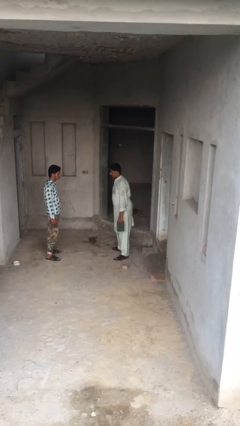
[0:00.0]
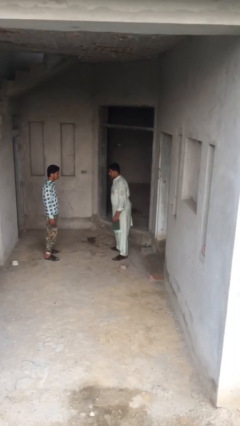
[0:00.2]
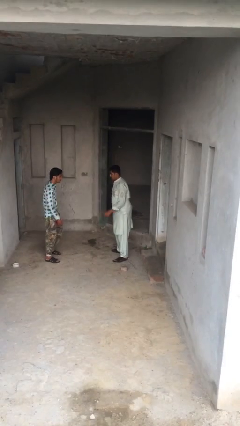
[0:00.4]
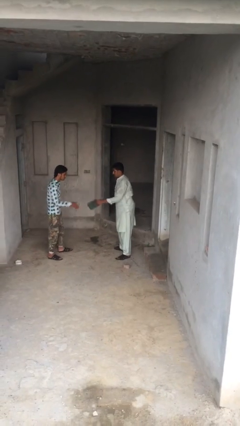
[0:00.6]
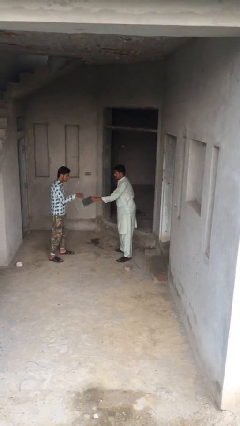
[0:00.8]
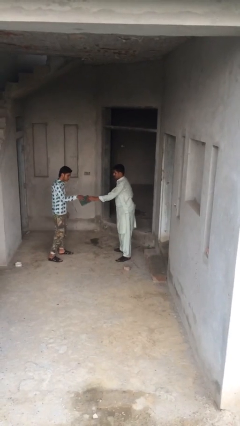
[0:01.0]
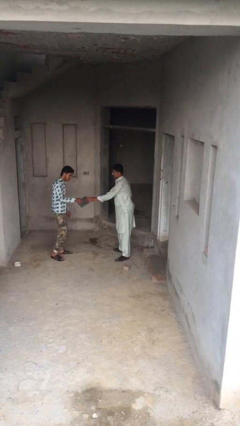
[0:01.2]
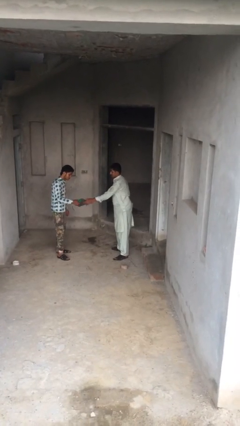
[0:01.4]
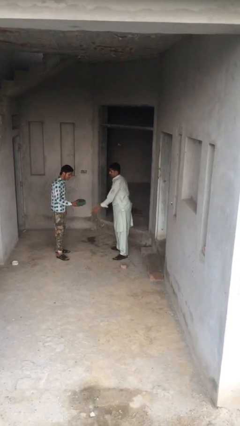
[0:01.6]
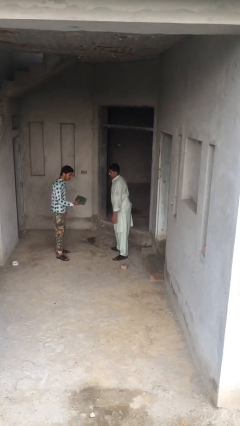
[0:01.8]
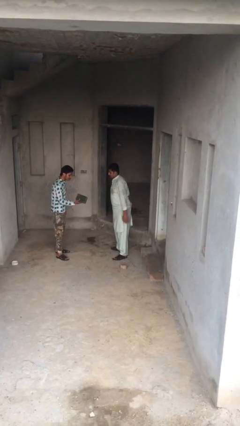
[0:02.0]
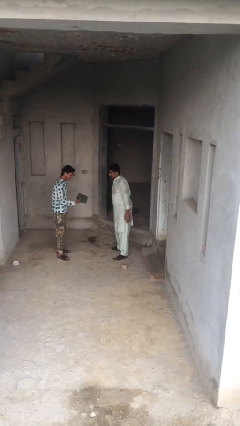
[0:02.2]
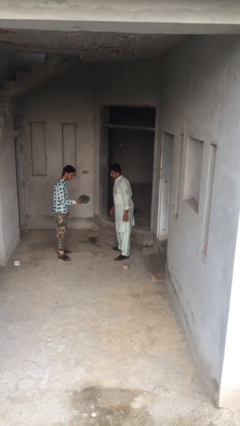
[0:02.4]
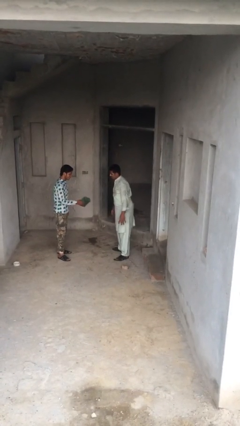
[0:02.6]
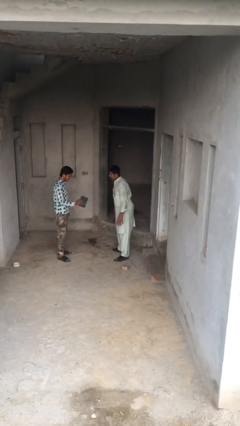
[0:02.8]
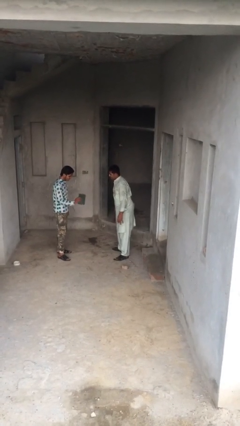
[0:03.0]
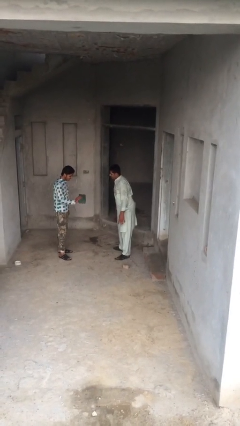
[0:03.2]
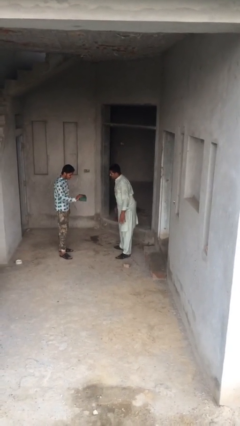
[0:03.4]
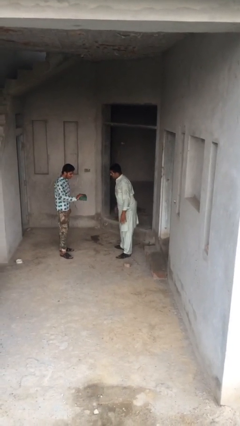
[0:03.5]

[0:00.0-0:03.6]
person transfers object to person

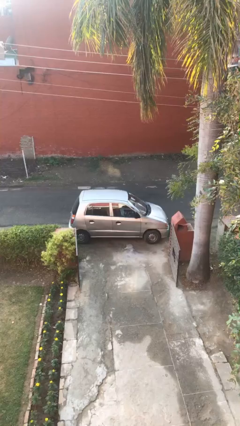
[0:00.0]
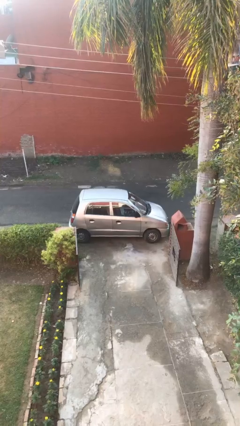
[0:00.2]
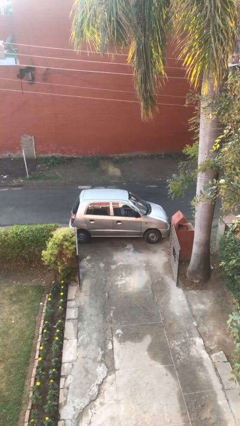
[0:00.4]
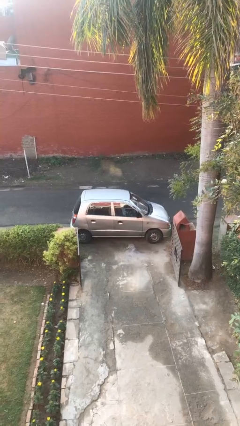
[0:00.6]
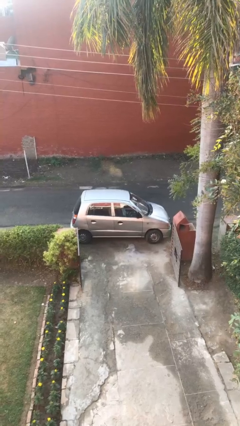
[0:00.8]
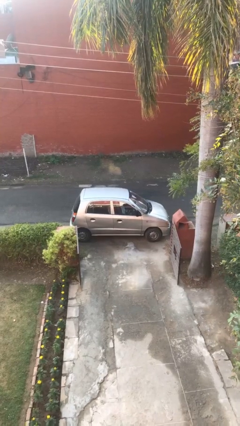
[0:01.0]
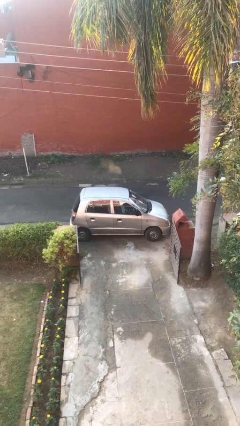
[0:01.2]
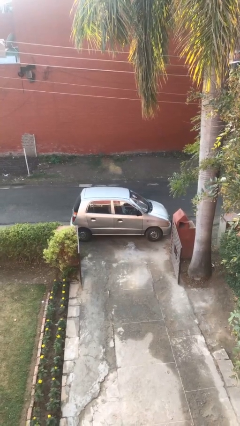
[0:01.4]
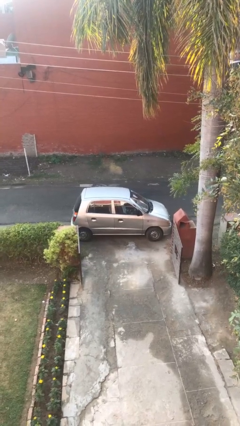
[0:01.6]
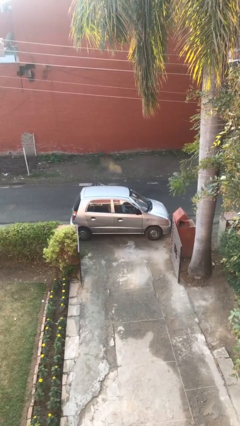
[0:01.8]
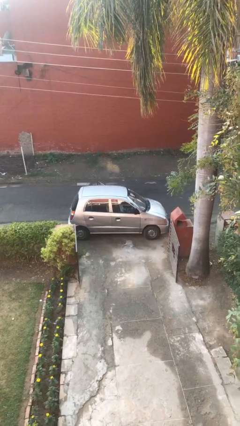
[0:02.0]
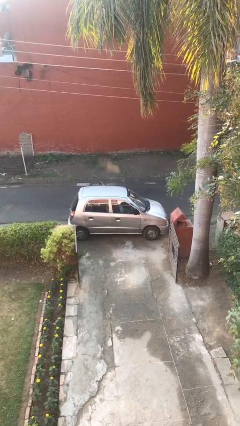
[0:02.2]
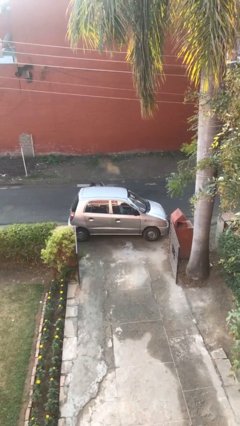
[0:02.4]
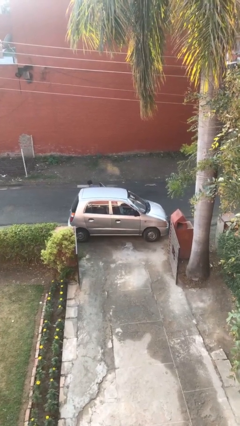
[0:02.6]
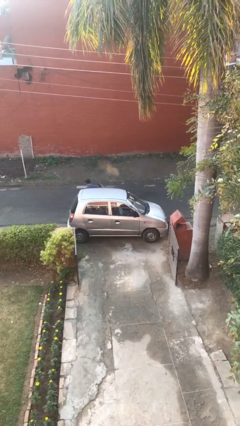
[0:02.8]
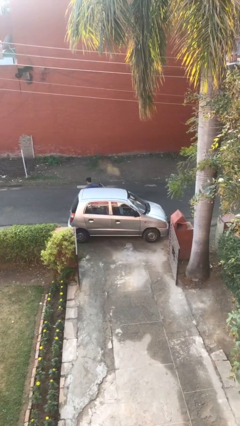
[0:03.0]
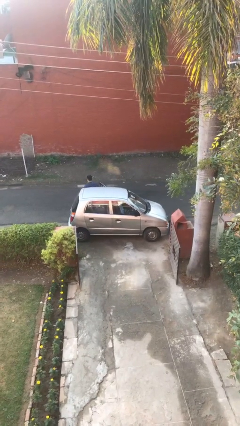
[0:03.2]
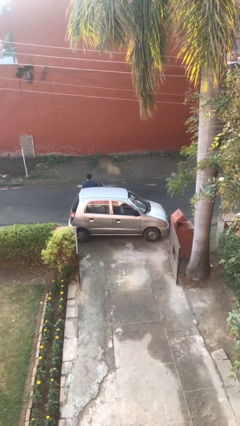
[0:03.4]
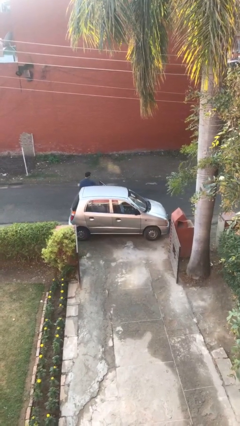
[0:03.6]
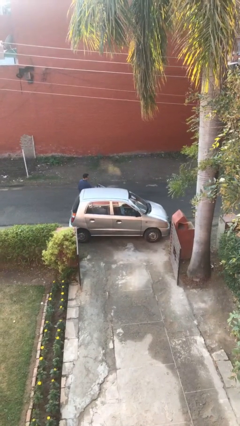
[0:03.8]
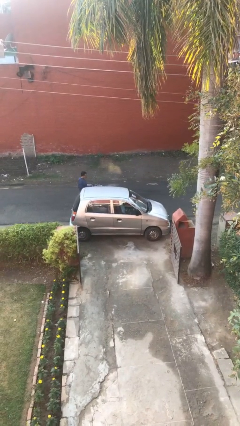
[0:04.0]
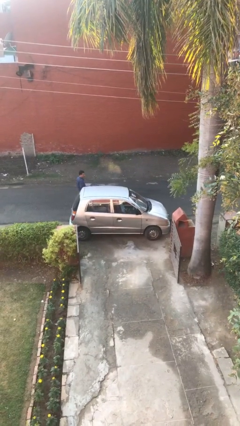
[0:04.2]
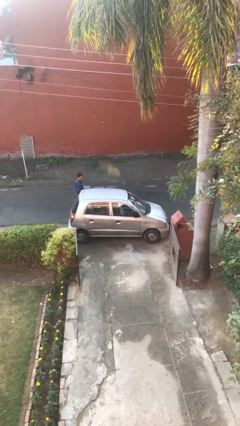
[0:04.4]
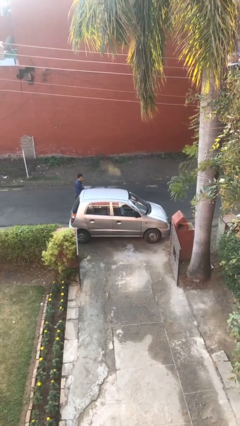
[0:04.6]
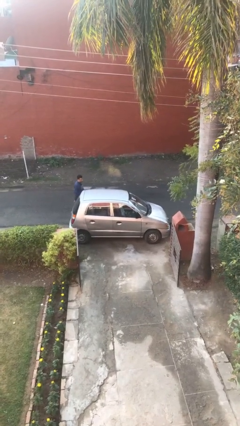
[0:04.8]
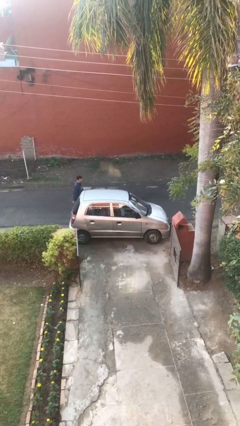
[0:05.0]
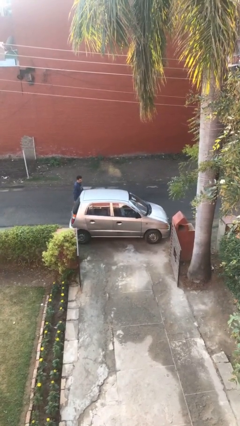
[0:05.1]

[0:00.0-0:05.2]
car drops off person

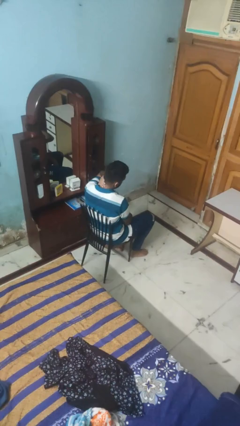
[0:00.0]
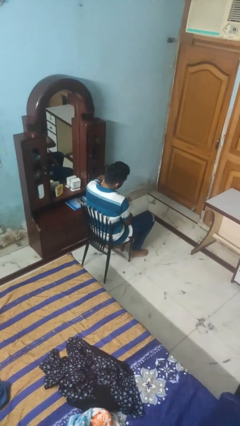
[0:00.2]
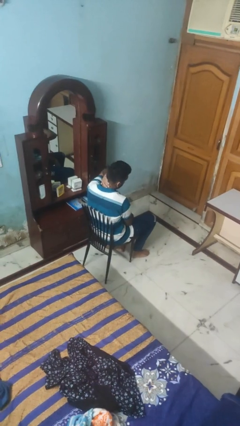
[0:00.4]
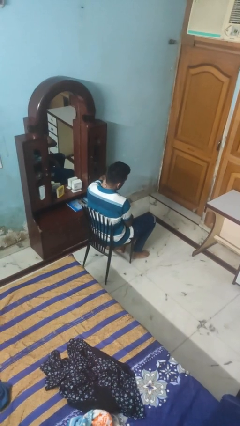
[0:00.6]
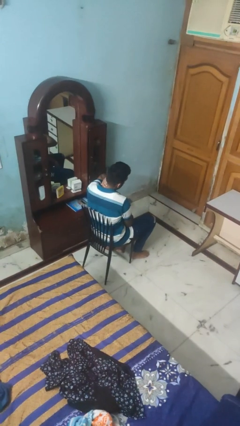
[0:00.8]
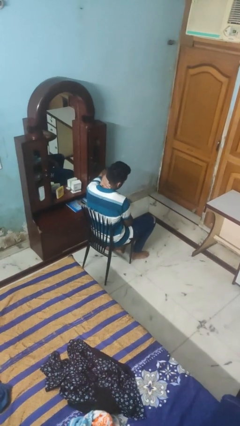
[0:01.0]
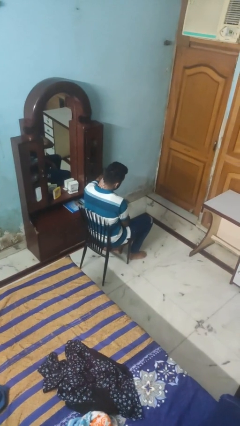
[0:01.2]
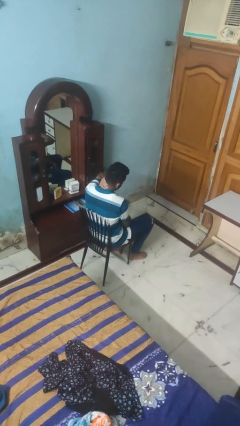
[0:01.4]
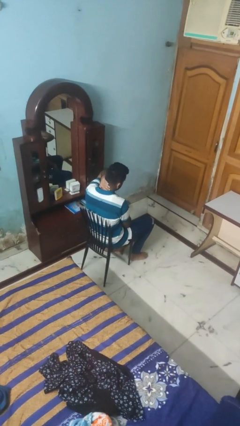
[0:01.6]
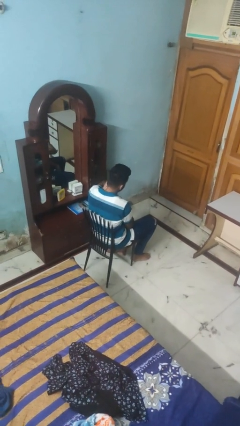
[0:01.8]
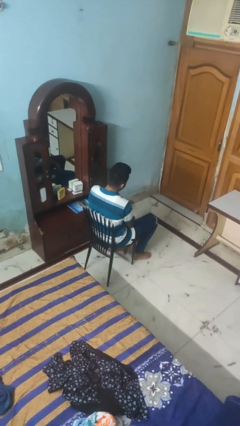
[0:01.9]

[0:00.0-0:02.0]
person rubs neck

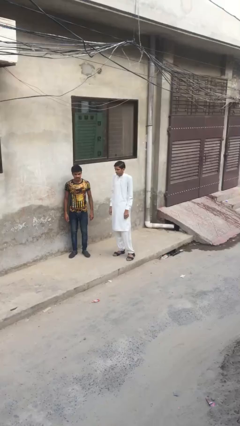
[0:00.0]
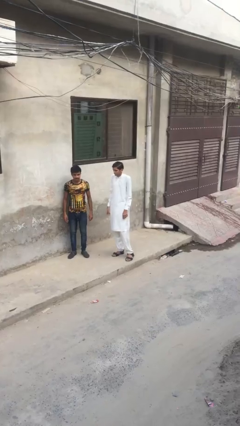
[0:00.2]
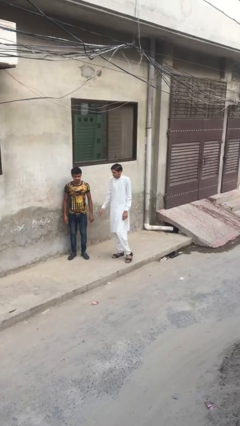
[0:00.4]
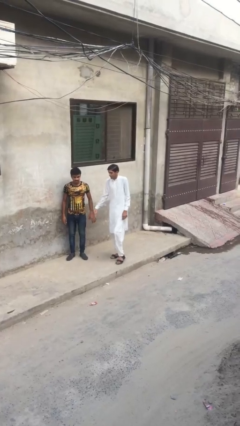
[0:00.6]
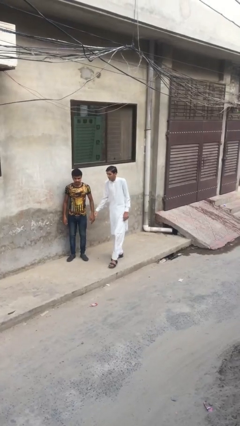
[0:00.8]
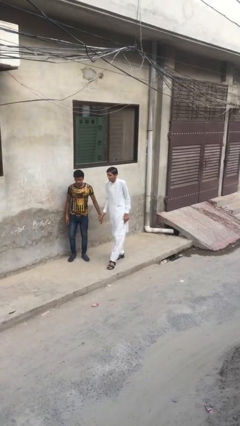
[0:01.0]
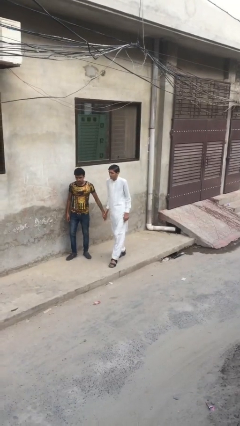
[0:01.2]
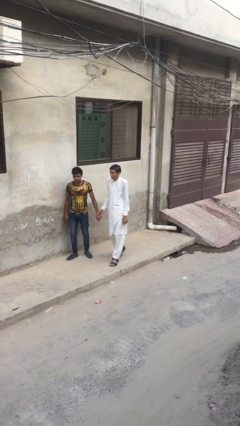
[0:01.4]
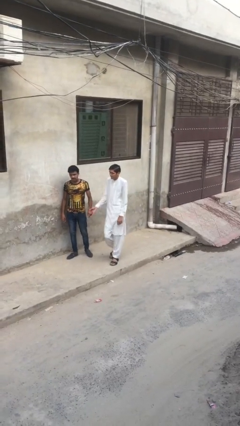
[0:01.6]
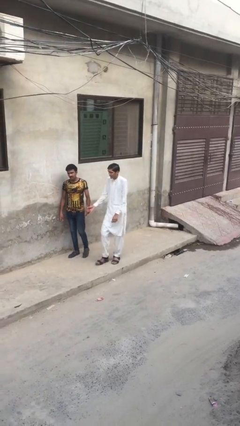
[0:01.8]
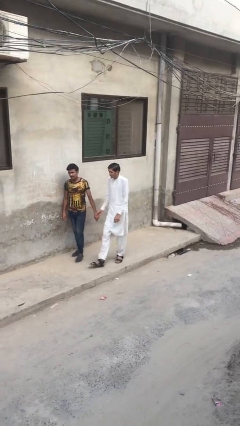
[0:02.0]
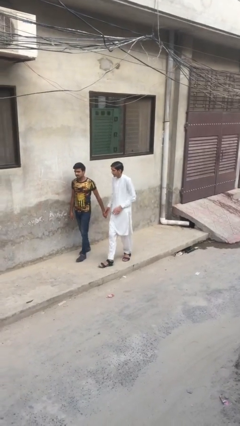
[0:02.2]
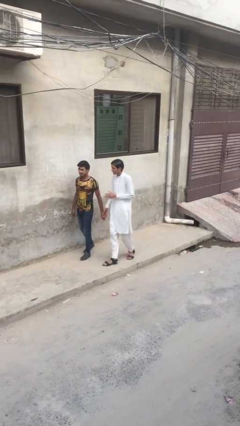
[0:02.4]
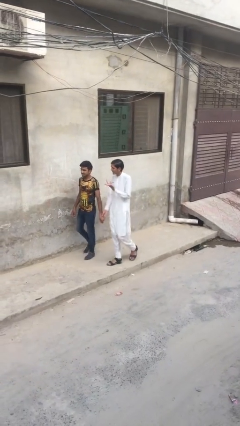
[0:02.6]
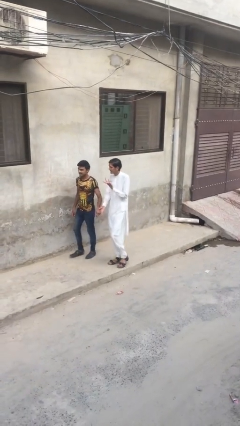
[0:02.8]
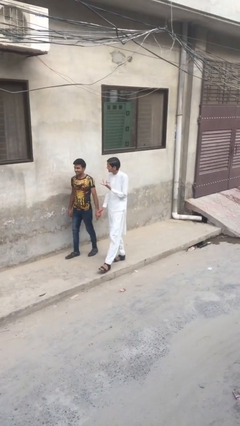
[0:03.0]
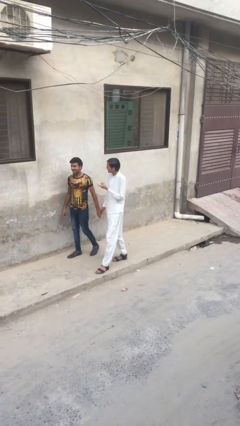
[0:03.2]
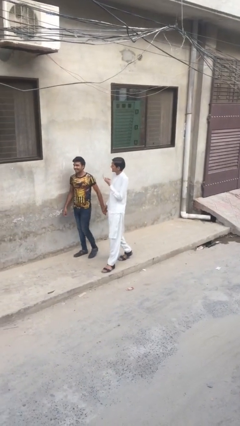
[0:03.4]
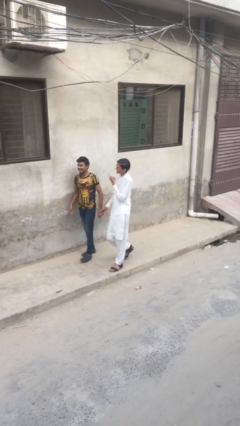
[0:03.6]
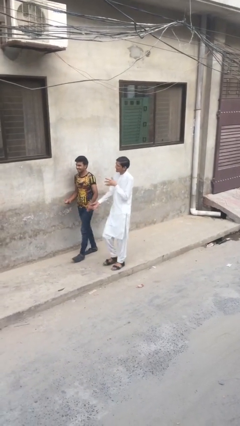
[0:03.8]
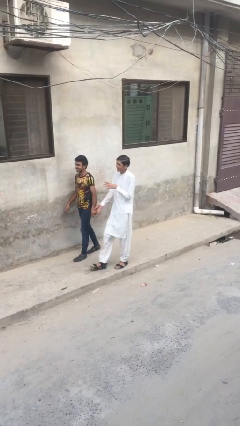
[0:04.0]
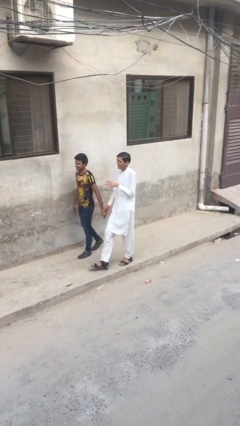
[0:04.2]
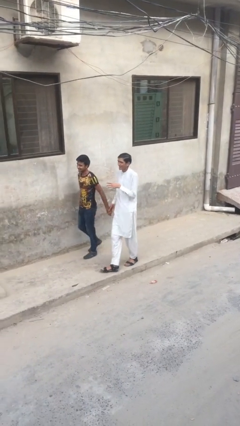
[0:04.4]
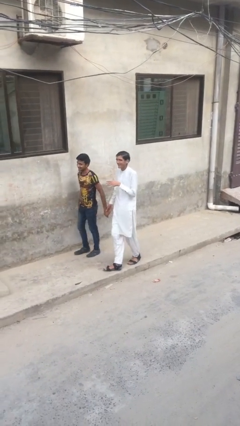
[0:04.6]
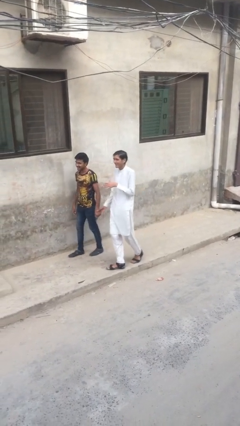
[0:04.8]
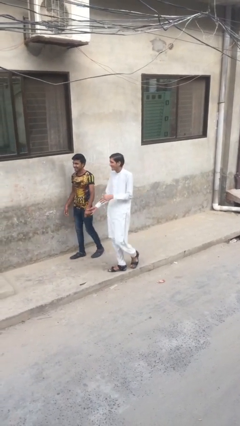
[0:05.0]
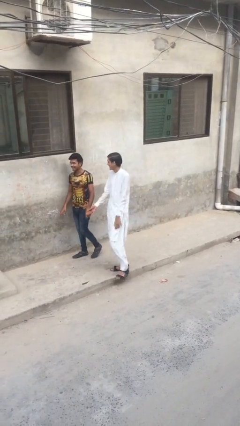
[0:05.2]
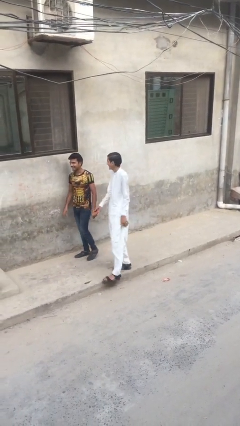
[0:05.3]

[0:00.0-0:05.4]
person holds hand

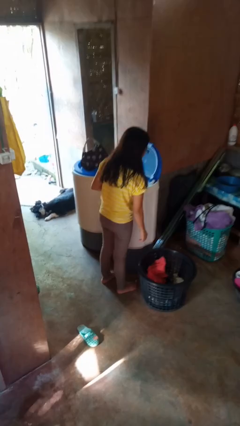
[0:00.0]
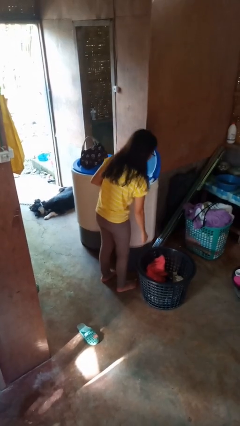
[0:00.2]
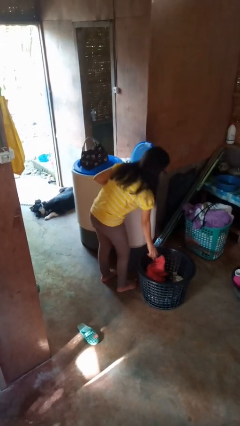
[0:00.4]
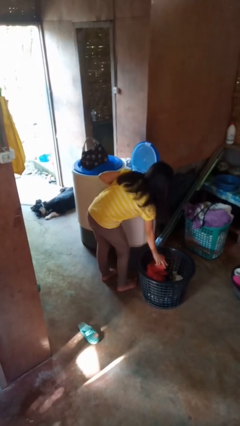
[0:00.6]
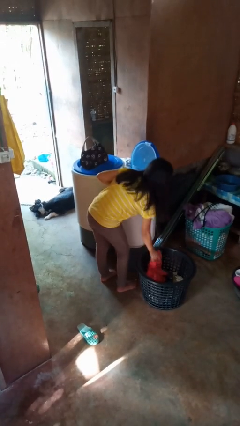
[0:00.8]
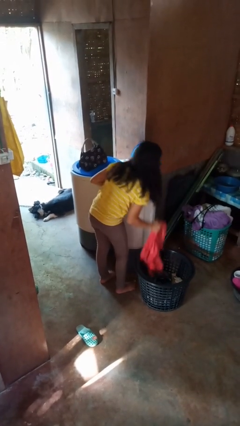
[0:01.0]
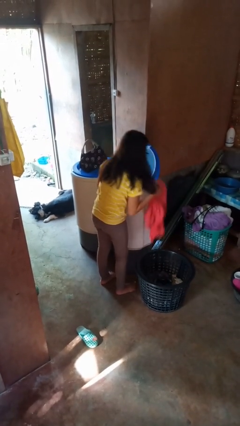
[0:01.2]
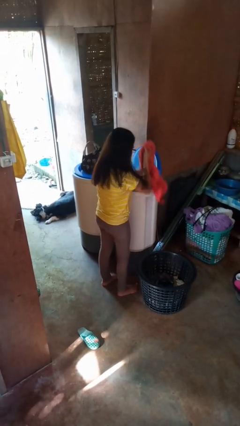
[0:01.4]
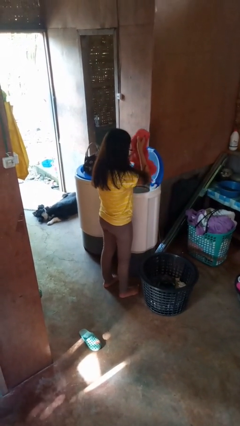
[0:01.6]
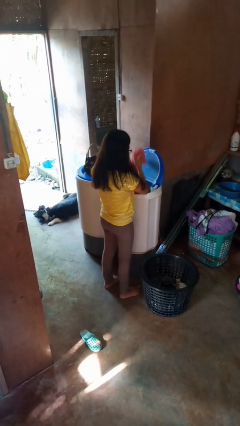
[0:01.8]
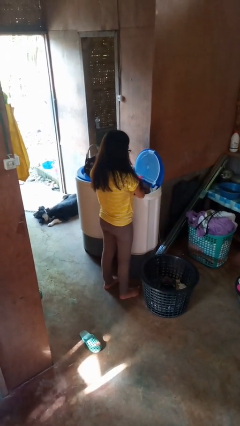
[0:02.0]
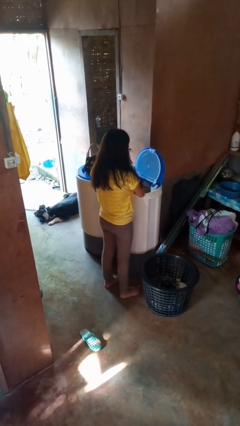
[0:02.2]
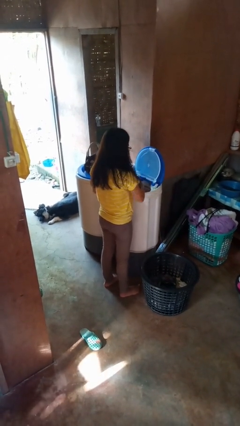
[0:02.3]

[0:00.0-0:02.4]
person loads clotheswasher
